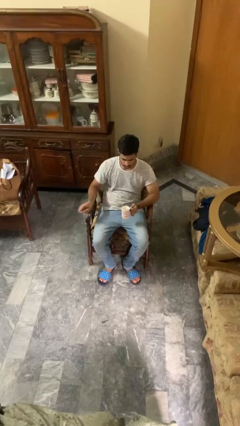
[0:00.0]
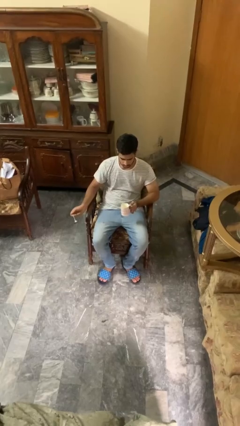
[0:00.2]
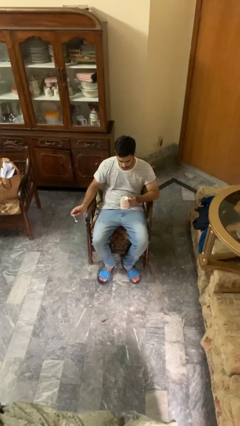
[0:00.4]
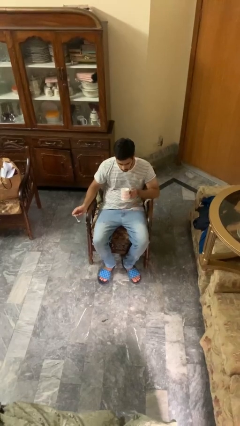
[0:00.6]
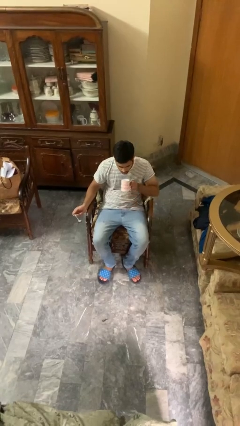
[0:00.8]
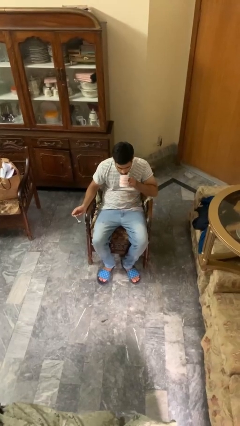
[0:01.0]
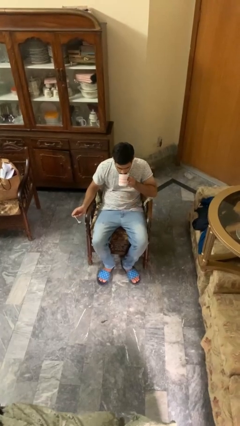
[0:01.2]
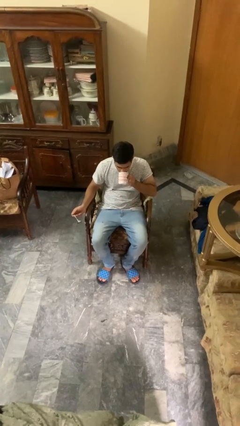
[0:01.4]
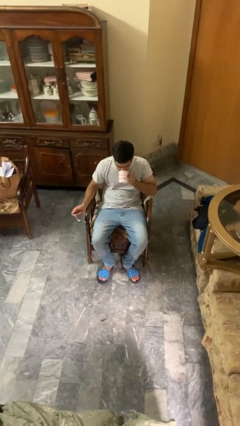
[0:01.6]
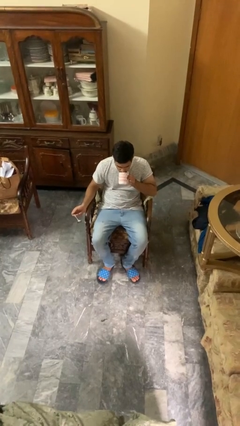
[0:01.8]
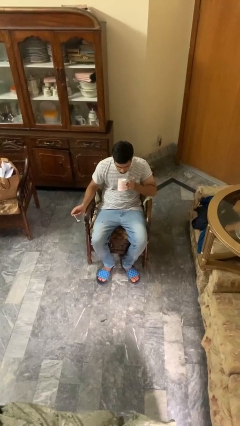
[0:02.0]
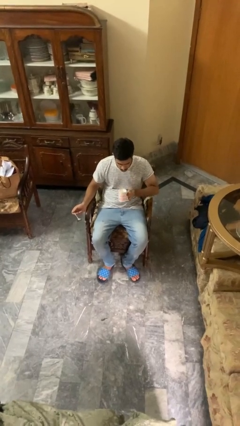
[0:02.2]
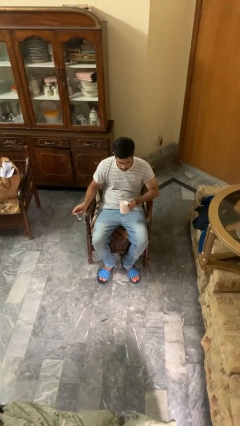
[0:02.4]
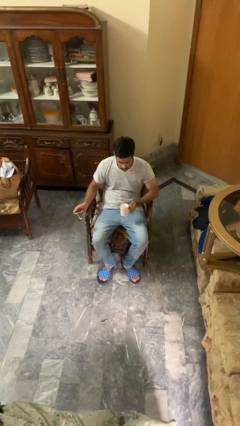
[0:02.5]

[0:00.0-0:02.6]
person drinks from mug

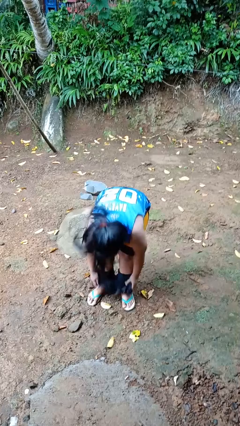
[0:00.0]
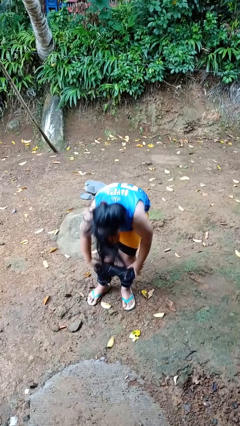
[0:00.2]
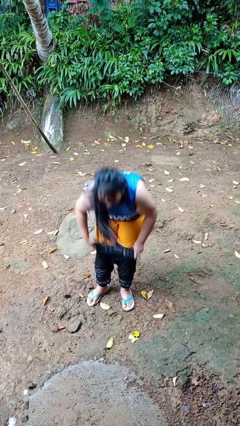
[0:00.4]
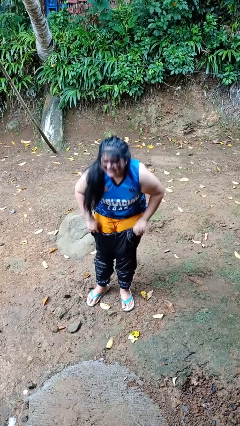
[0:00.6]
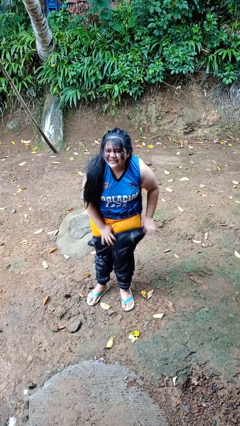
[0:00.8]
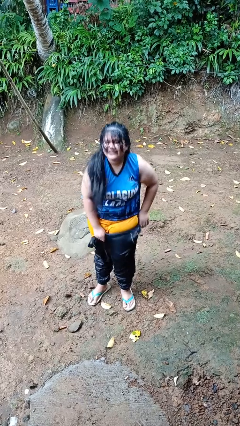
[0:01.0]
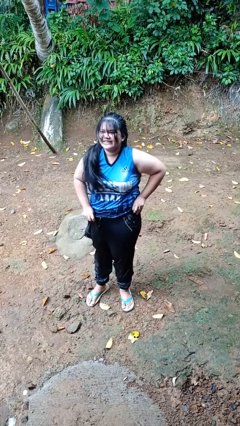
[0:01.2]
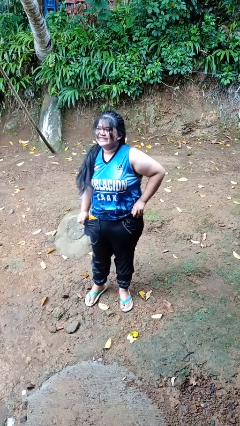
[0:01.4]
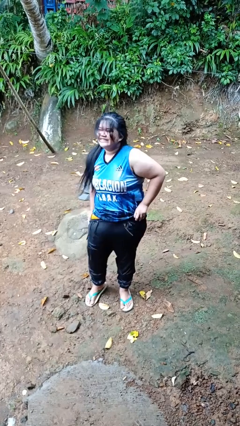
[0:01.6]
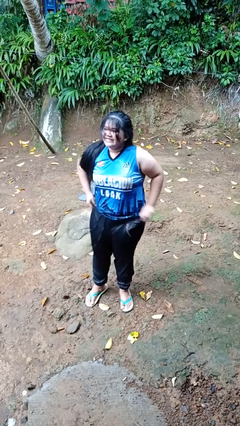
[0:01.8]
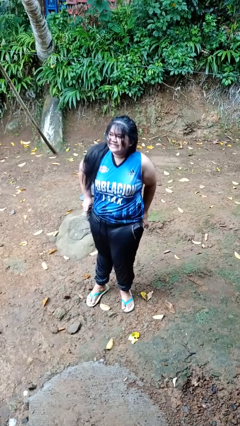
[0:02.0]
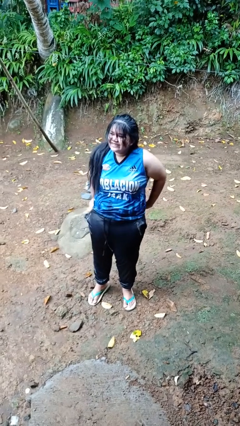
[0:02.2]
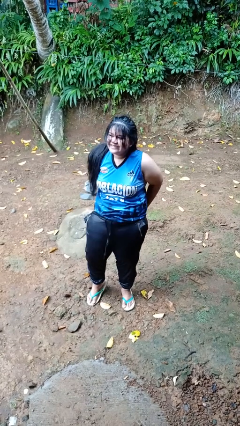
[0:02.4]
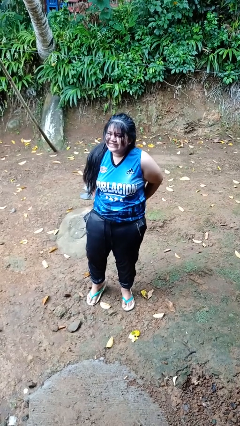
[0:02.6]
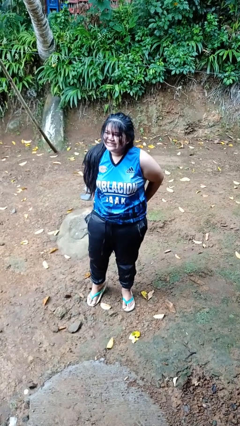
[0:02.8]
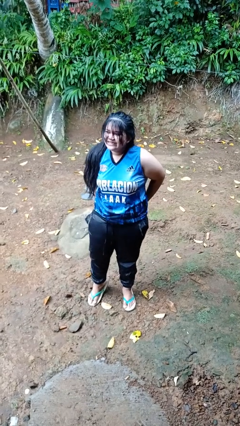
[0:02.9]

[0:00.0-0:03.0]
person puts on pants

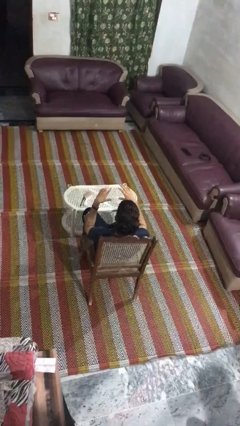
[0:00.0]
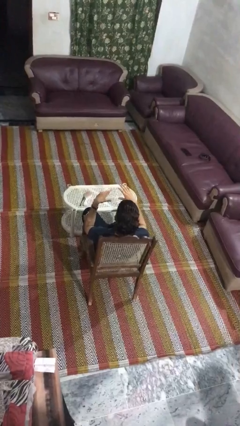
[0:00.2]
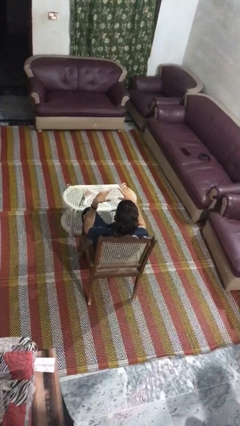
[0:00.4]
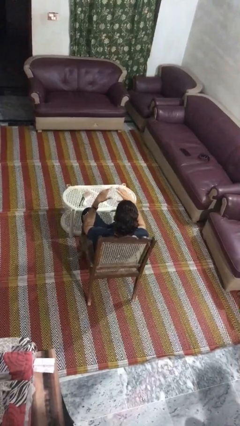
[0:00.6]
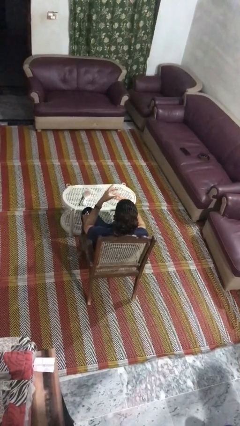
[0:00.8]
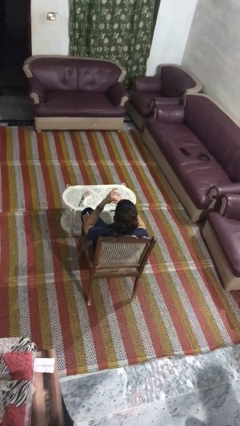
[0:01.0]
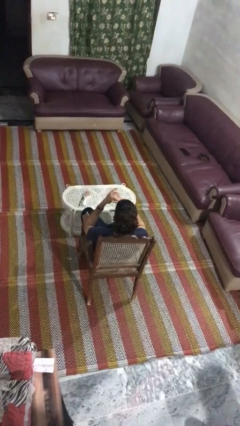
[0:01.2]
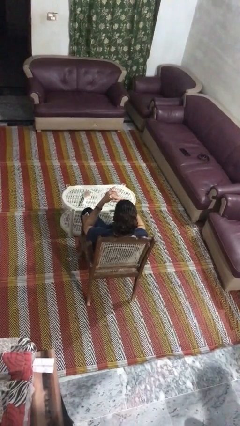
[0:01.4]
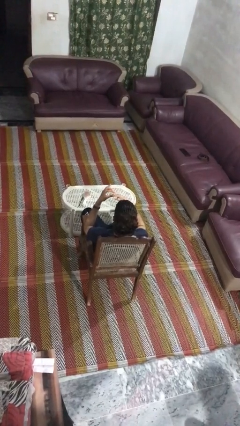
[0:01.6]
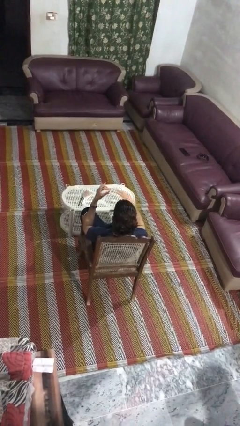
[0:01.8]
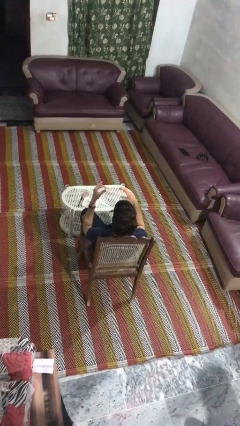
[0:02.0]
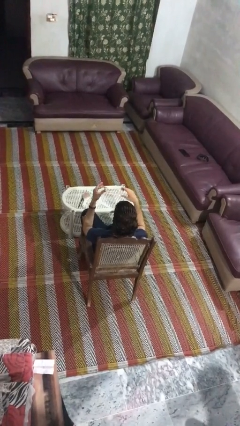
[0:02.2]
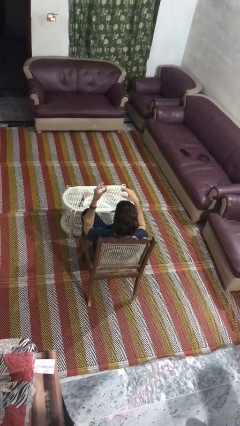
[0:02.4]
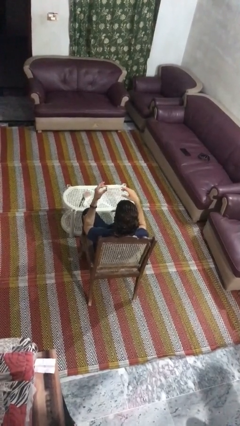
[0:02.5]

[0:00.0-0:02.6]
person takes off ring

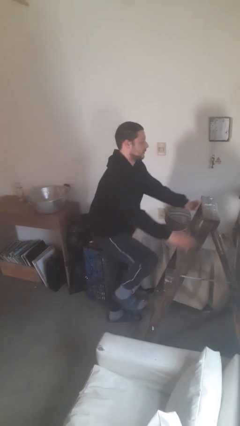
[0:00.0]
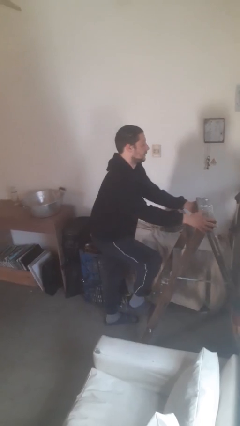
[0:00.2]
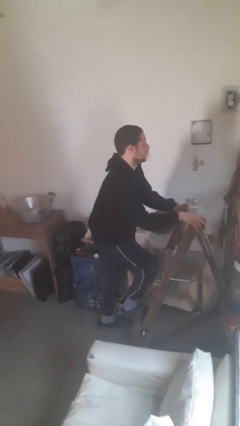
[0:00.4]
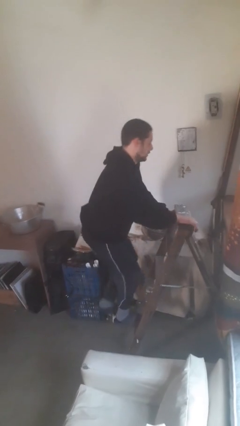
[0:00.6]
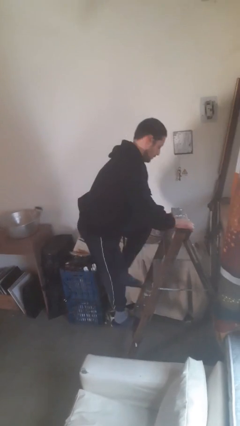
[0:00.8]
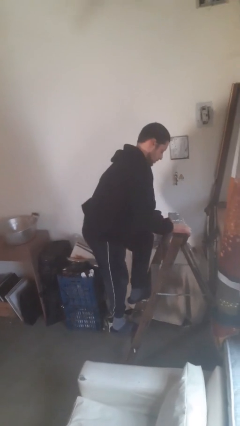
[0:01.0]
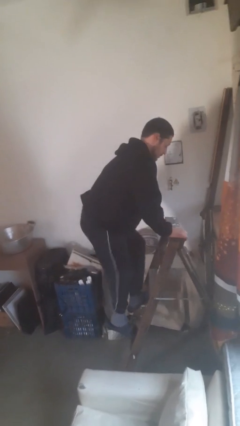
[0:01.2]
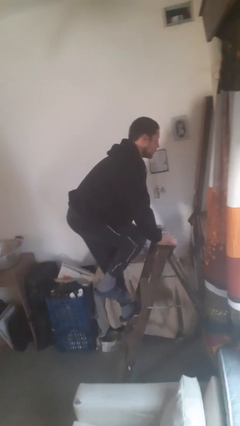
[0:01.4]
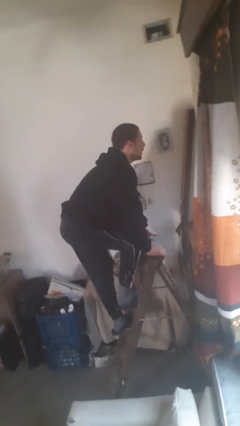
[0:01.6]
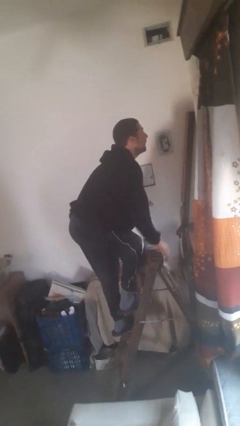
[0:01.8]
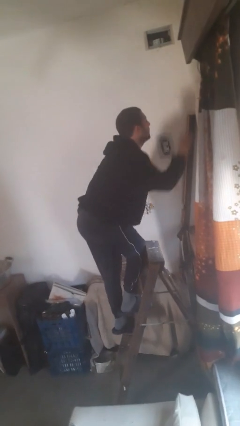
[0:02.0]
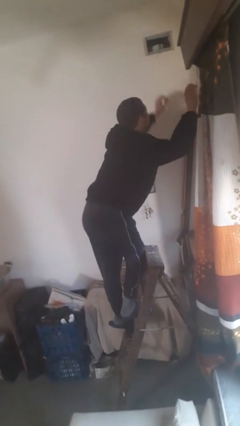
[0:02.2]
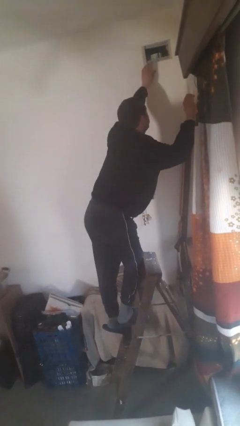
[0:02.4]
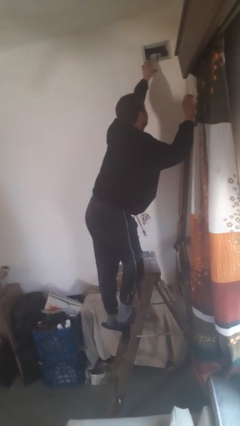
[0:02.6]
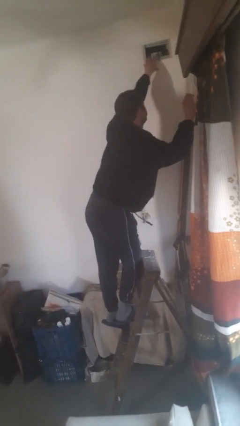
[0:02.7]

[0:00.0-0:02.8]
person climbs up ladder

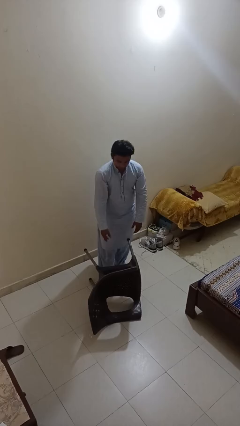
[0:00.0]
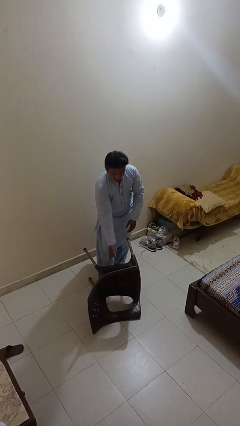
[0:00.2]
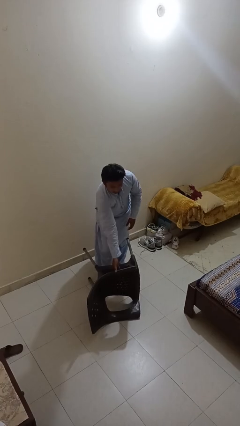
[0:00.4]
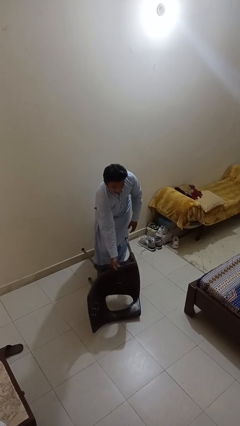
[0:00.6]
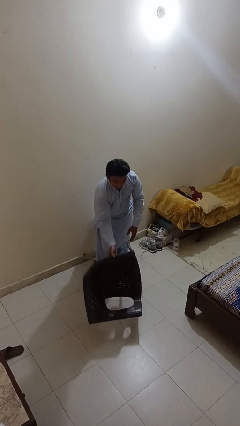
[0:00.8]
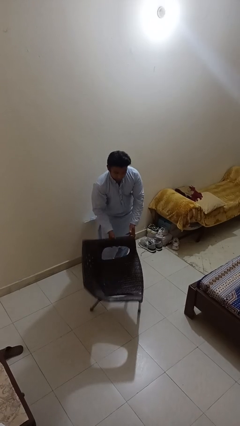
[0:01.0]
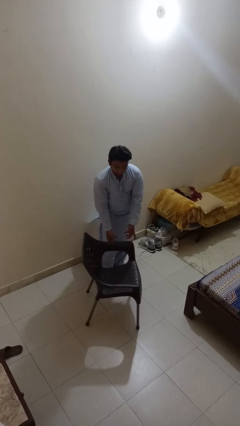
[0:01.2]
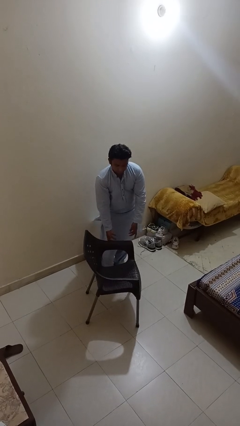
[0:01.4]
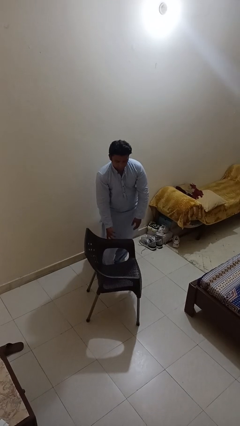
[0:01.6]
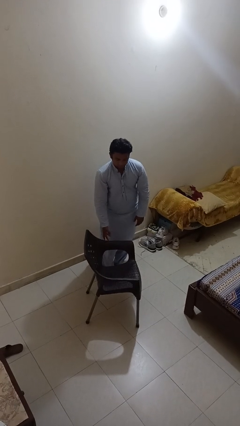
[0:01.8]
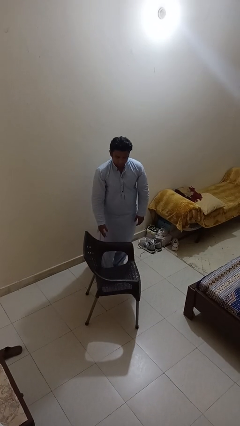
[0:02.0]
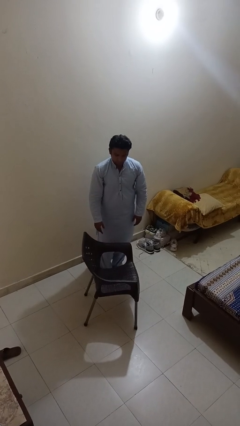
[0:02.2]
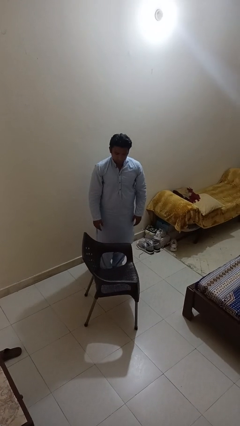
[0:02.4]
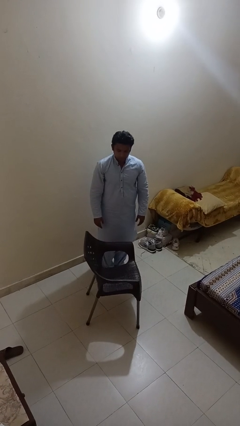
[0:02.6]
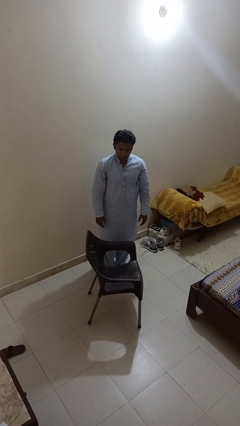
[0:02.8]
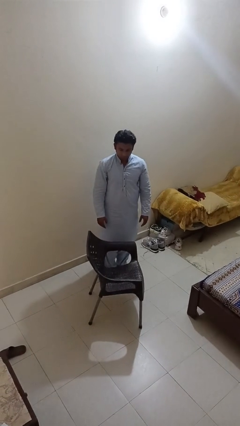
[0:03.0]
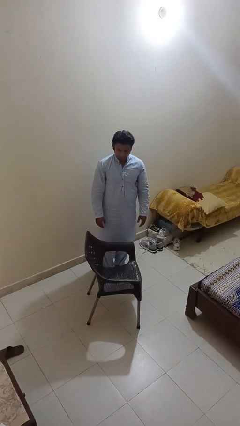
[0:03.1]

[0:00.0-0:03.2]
person sets upright furniture

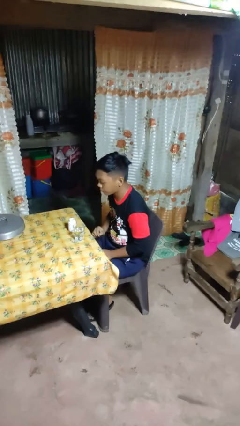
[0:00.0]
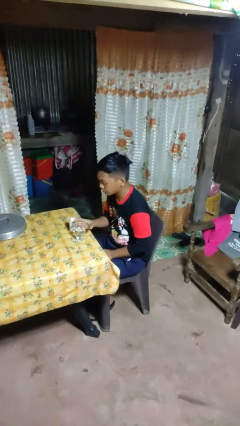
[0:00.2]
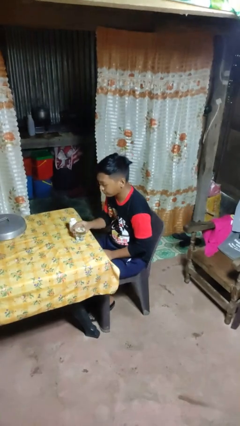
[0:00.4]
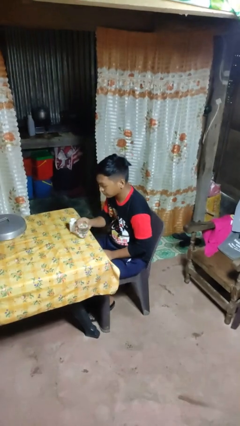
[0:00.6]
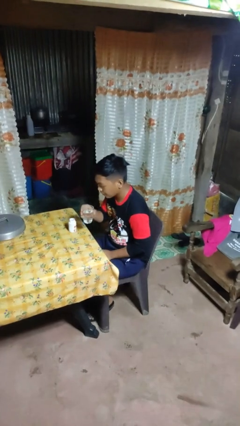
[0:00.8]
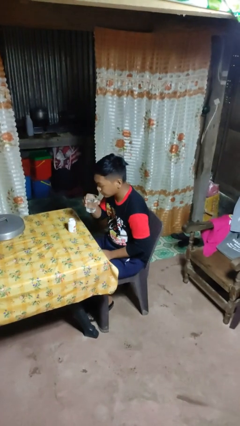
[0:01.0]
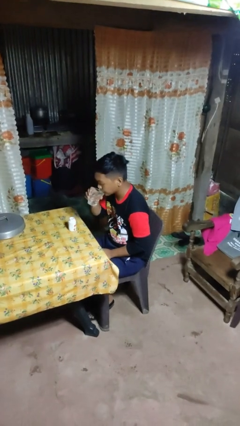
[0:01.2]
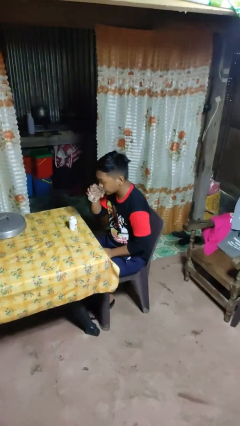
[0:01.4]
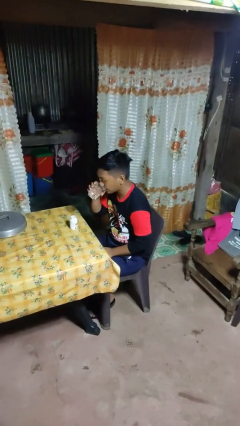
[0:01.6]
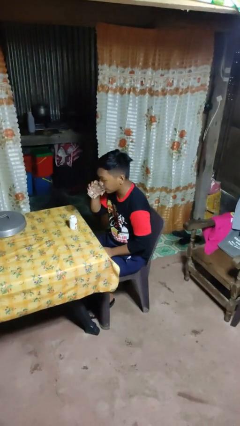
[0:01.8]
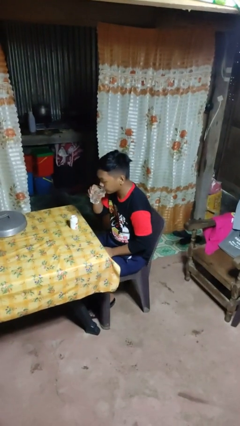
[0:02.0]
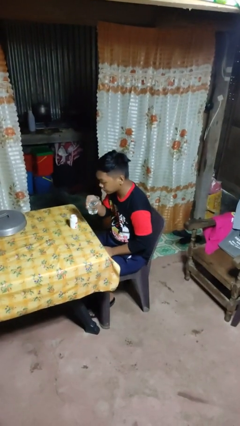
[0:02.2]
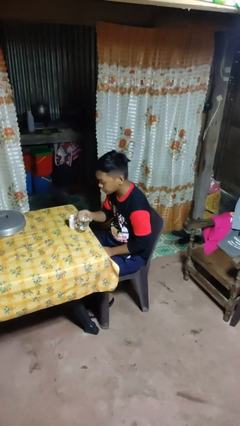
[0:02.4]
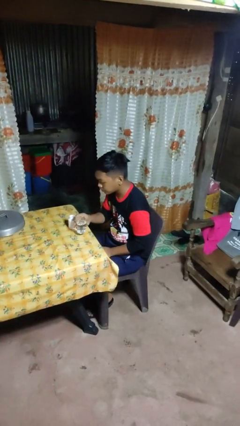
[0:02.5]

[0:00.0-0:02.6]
person drinks from cup

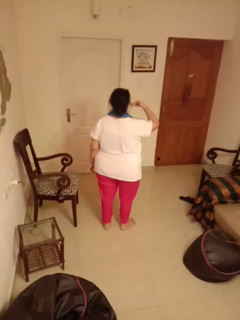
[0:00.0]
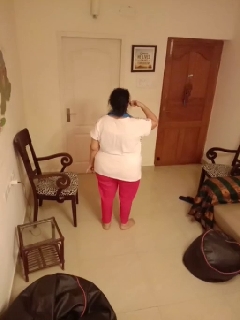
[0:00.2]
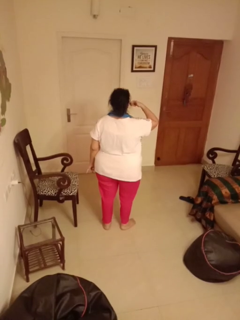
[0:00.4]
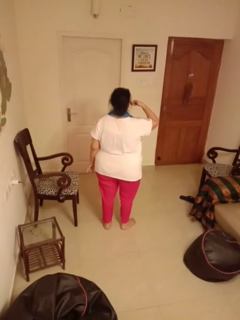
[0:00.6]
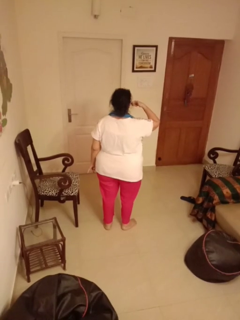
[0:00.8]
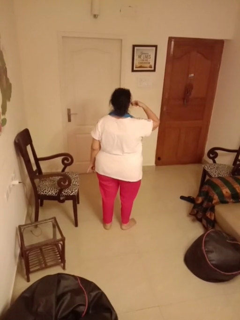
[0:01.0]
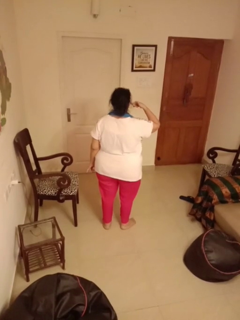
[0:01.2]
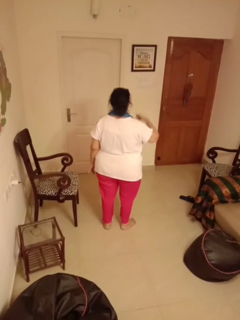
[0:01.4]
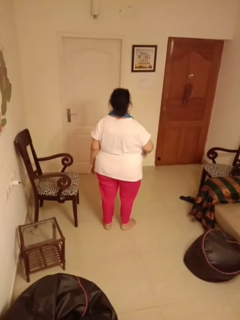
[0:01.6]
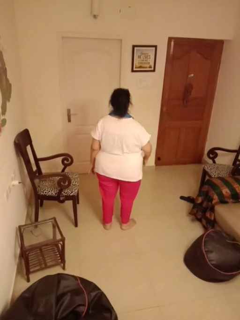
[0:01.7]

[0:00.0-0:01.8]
person gestures call me
